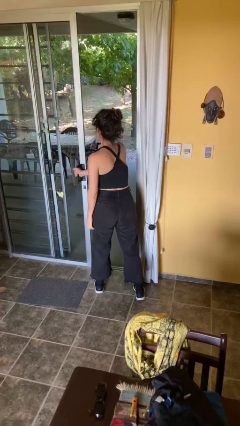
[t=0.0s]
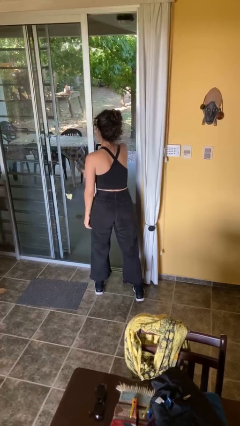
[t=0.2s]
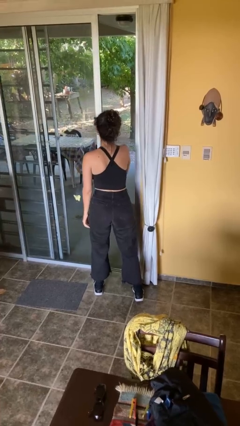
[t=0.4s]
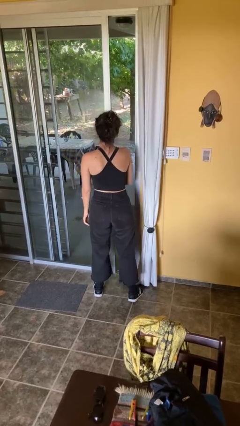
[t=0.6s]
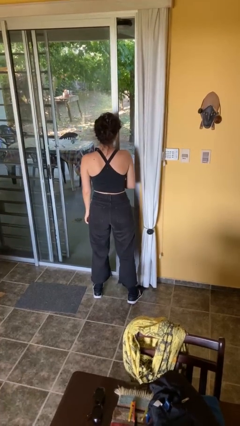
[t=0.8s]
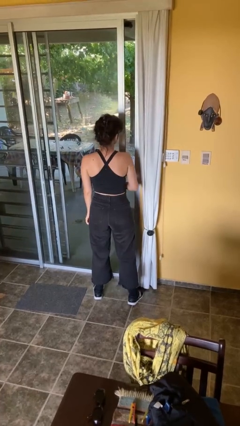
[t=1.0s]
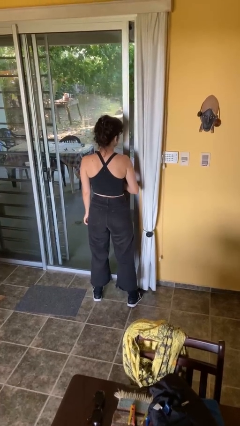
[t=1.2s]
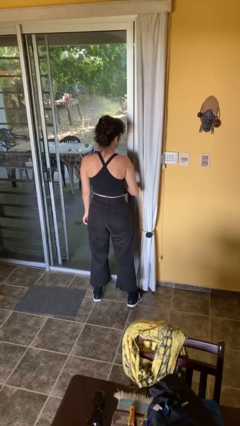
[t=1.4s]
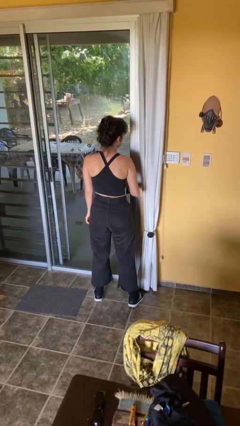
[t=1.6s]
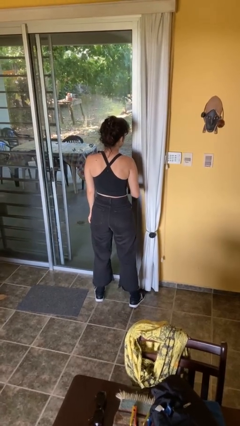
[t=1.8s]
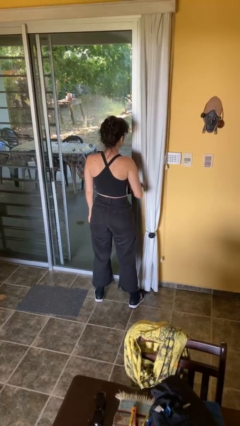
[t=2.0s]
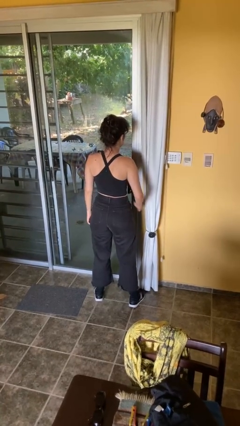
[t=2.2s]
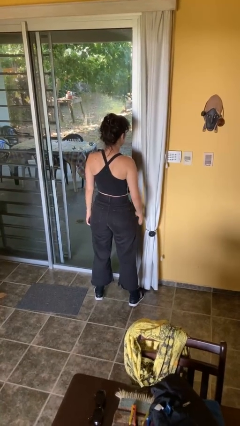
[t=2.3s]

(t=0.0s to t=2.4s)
person closes facility door

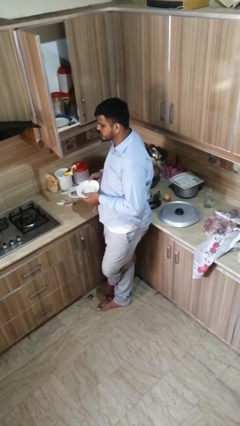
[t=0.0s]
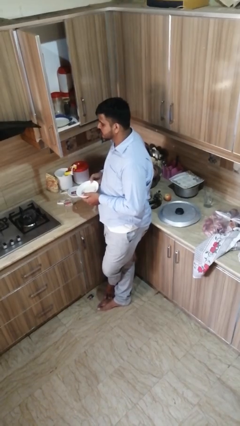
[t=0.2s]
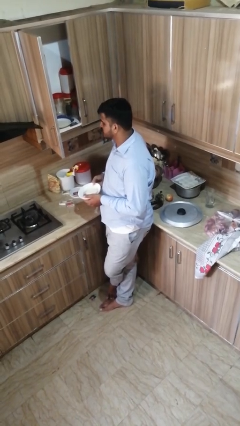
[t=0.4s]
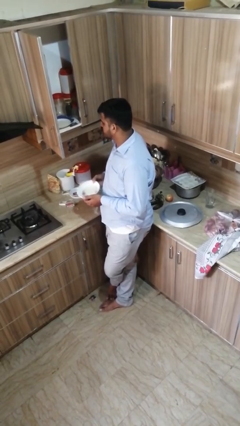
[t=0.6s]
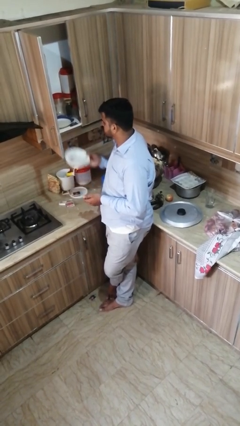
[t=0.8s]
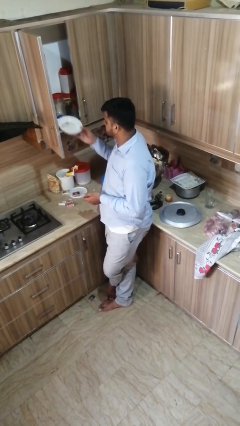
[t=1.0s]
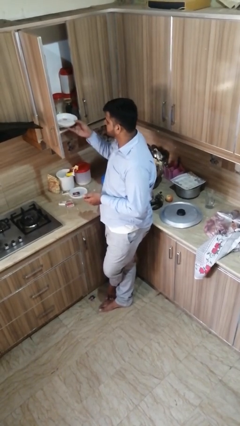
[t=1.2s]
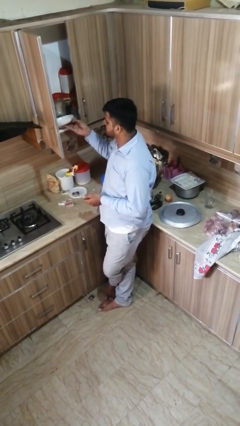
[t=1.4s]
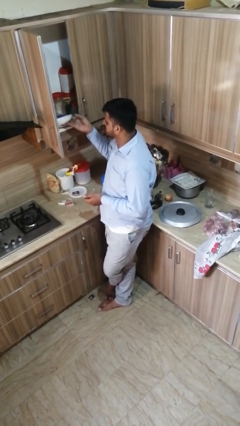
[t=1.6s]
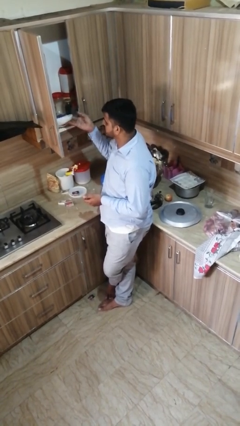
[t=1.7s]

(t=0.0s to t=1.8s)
person puts object in cabinet

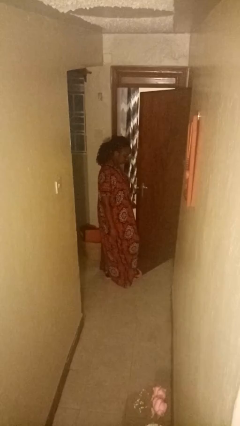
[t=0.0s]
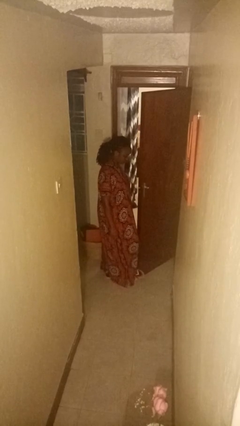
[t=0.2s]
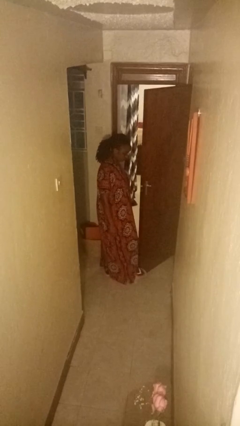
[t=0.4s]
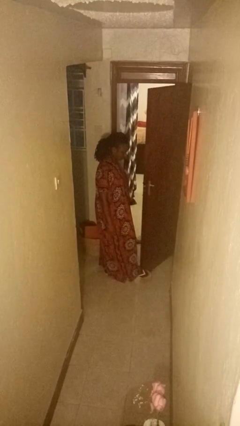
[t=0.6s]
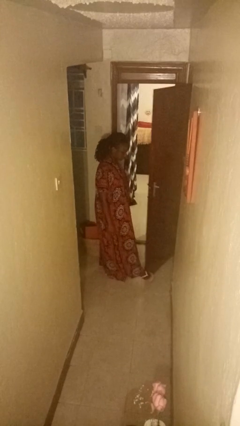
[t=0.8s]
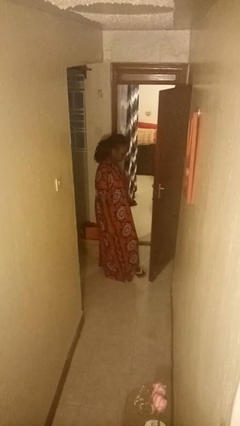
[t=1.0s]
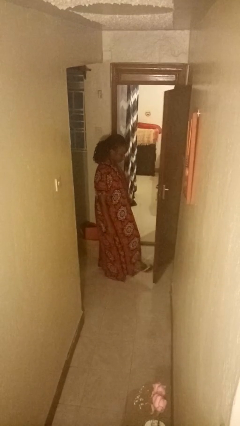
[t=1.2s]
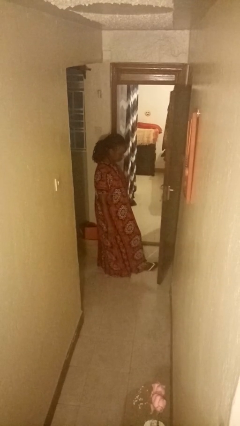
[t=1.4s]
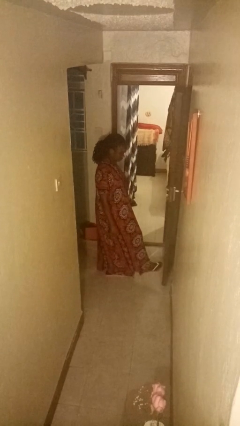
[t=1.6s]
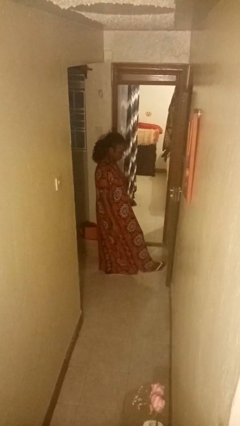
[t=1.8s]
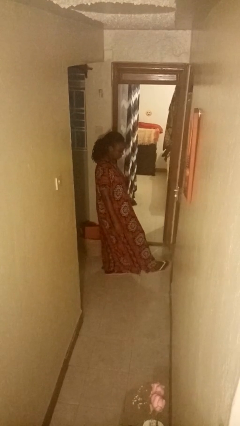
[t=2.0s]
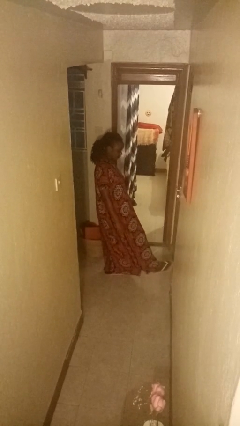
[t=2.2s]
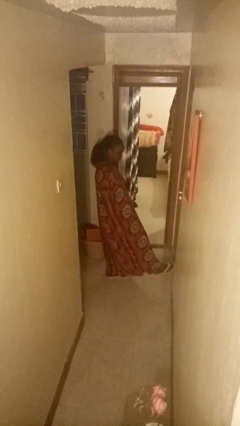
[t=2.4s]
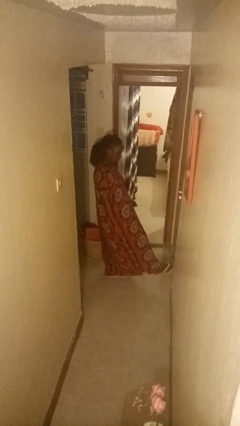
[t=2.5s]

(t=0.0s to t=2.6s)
person closes door with foot

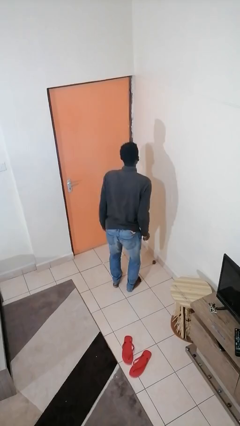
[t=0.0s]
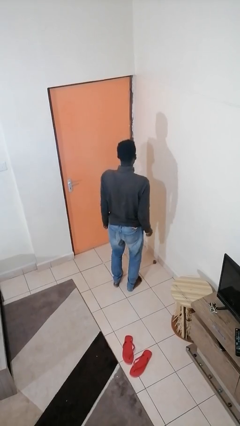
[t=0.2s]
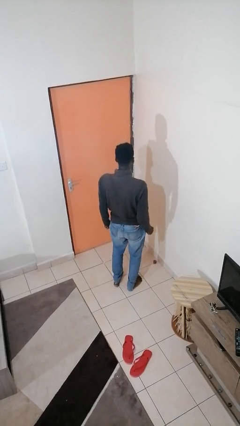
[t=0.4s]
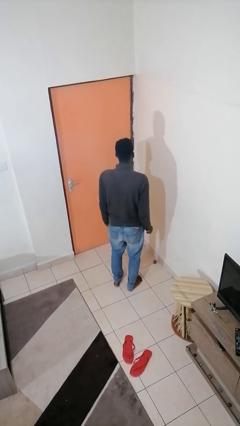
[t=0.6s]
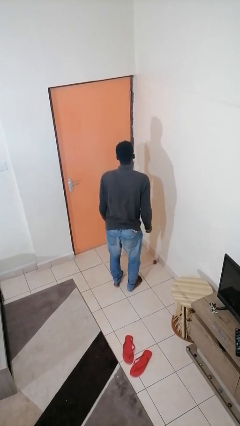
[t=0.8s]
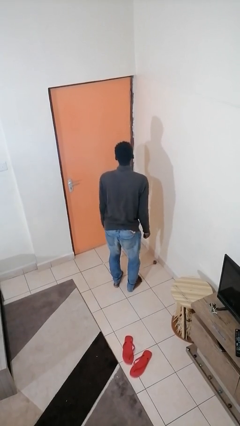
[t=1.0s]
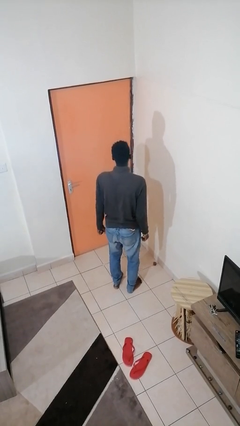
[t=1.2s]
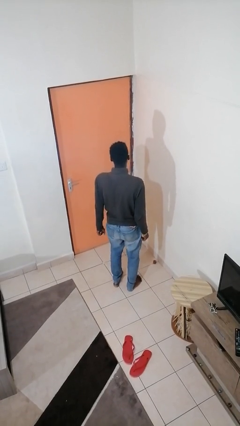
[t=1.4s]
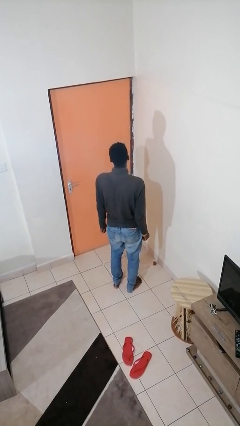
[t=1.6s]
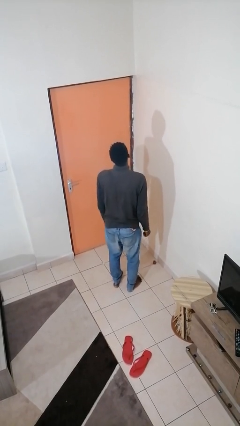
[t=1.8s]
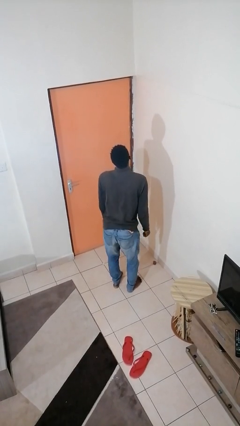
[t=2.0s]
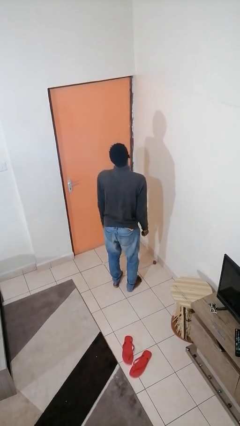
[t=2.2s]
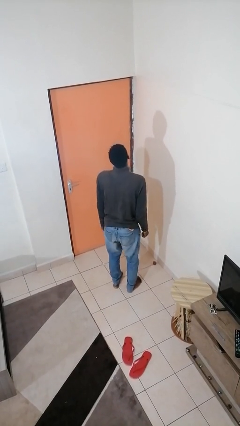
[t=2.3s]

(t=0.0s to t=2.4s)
person wiggles hips

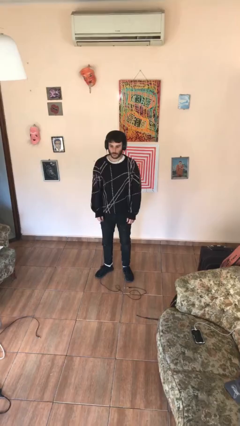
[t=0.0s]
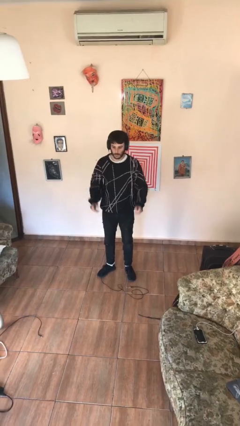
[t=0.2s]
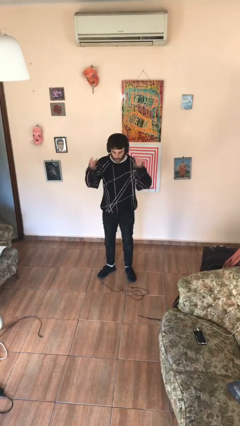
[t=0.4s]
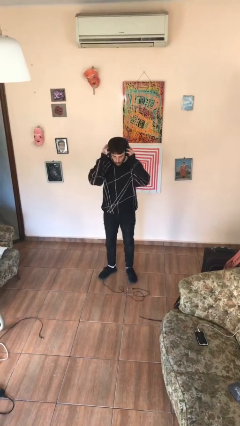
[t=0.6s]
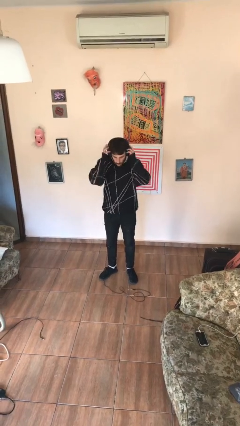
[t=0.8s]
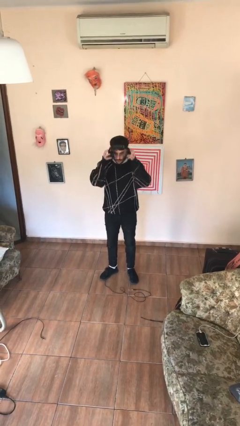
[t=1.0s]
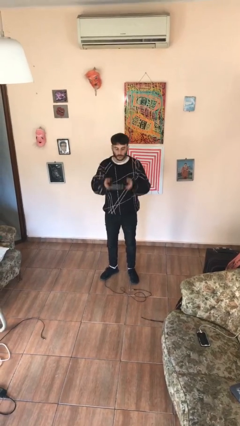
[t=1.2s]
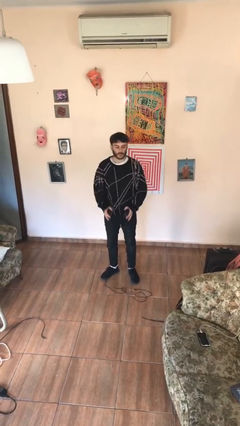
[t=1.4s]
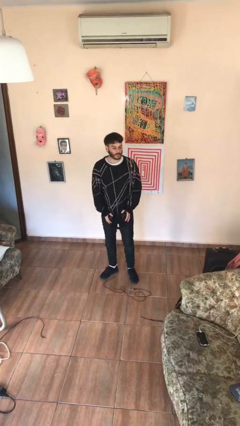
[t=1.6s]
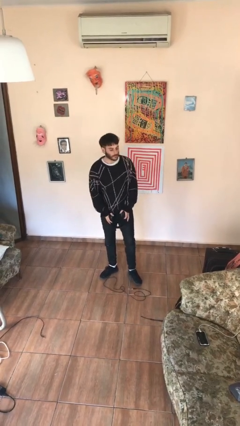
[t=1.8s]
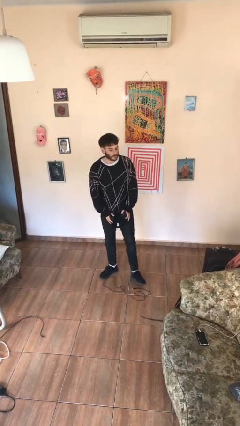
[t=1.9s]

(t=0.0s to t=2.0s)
person takes off headphones

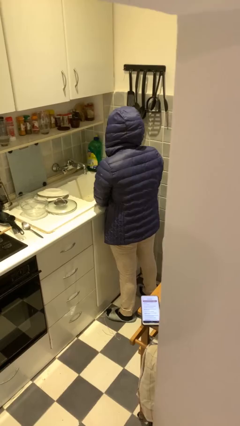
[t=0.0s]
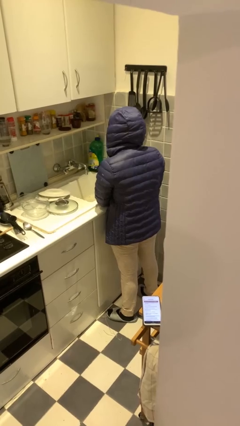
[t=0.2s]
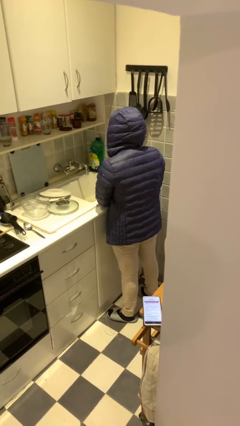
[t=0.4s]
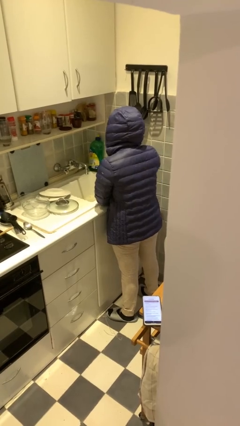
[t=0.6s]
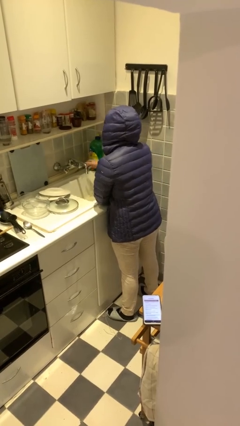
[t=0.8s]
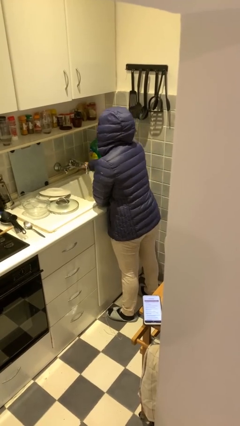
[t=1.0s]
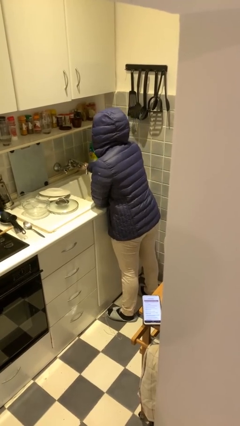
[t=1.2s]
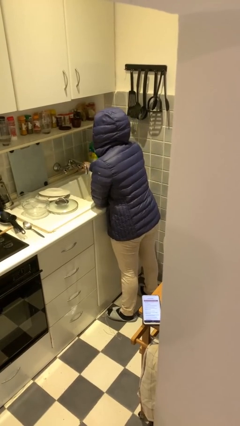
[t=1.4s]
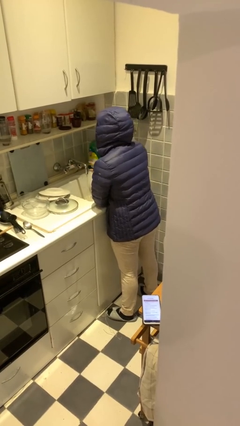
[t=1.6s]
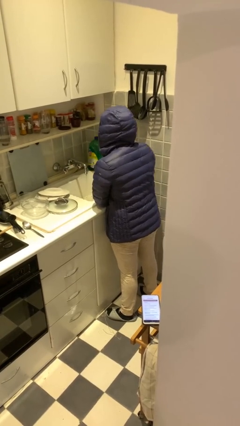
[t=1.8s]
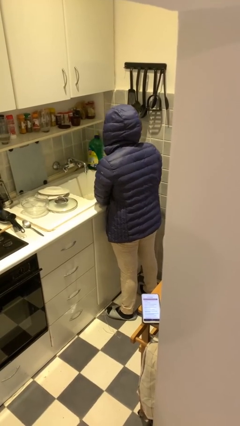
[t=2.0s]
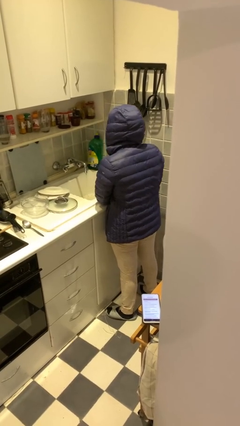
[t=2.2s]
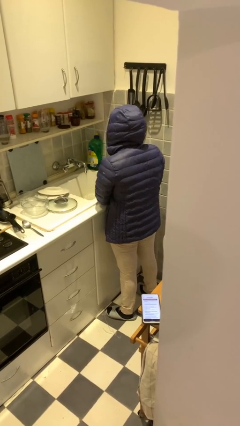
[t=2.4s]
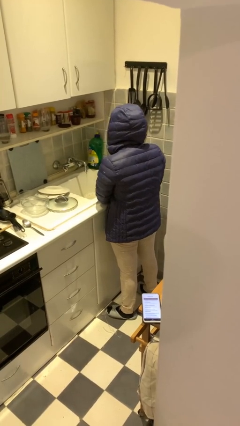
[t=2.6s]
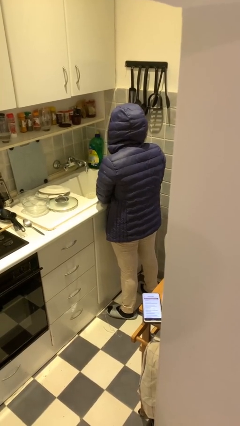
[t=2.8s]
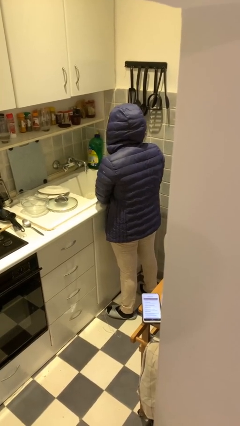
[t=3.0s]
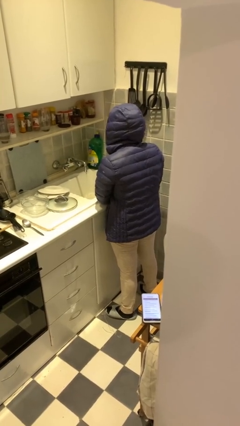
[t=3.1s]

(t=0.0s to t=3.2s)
person turns on faucet

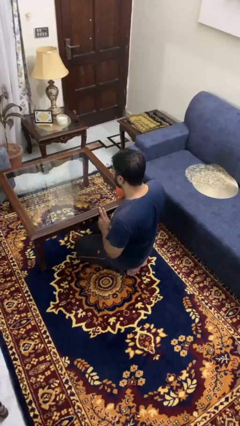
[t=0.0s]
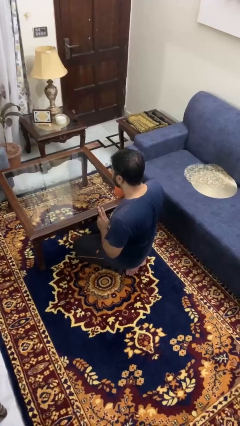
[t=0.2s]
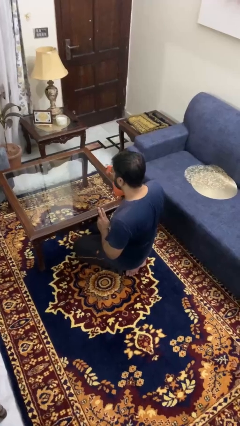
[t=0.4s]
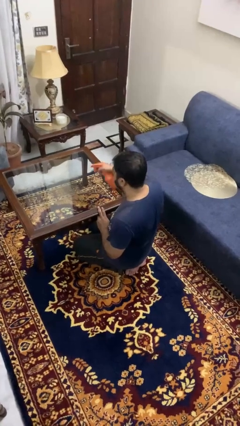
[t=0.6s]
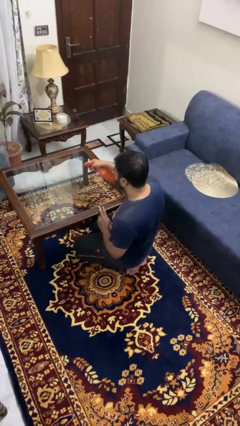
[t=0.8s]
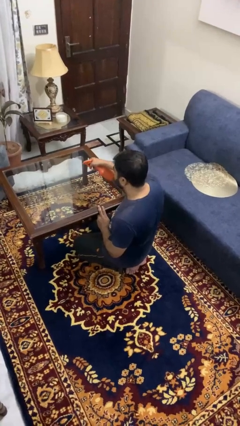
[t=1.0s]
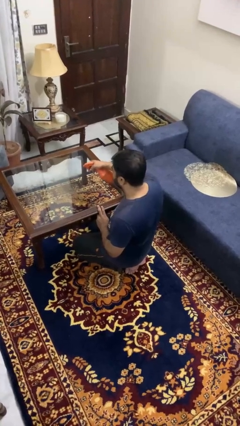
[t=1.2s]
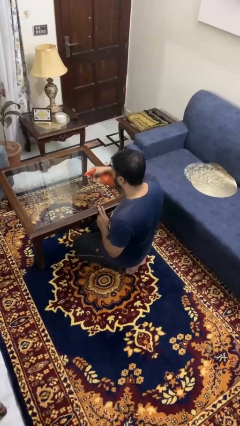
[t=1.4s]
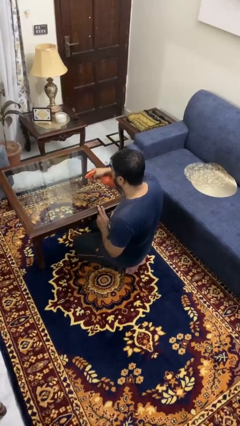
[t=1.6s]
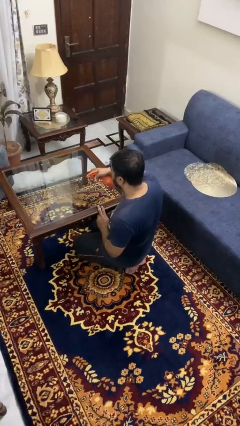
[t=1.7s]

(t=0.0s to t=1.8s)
person sprays from bottle

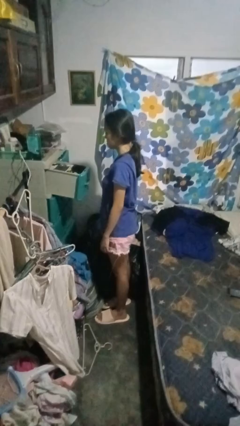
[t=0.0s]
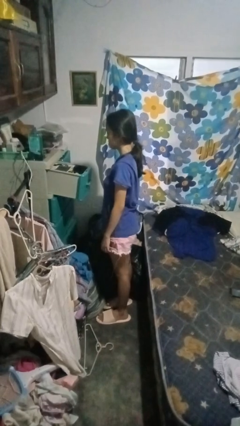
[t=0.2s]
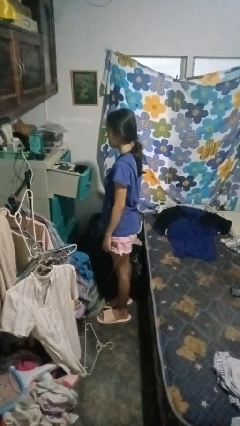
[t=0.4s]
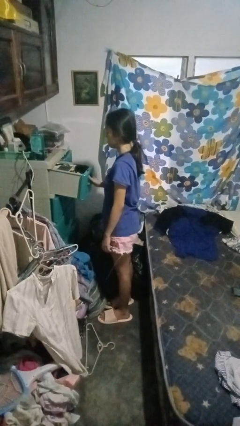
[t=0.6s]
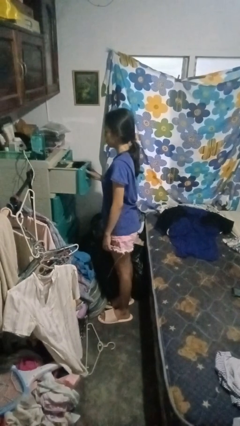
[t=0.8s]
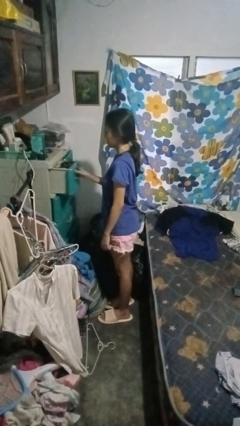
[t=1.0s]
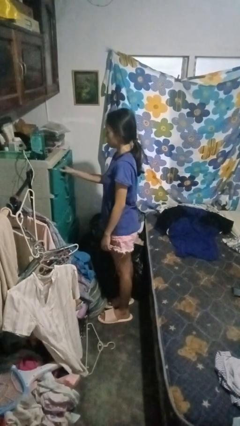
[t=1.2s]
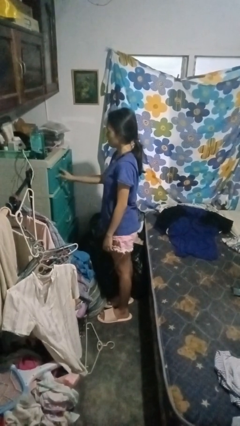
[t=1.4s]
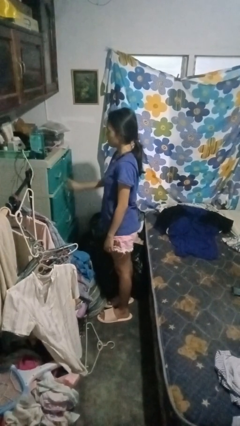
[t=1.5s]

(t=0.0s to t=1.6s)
person closes dresser drawer
